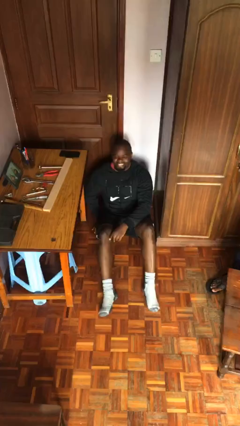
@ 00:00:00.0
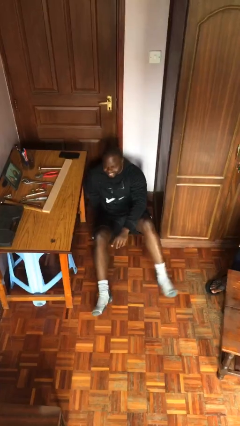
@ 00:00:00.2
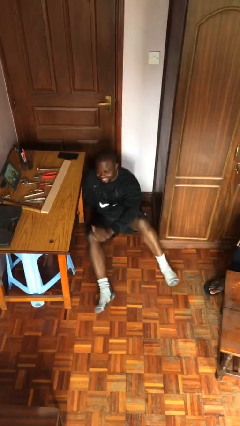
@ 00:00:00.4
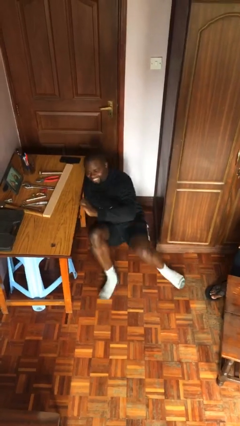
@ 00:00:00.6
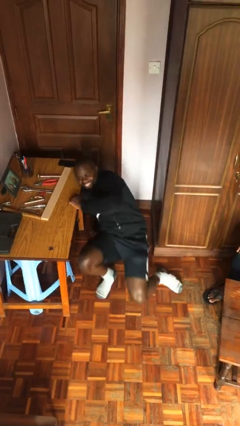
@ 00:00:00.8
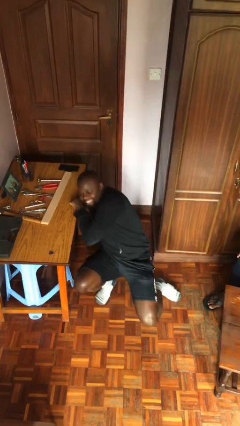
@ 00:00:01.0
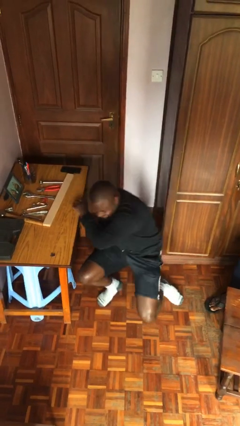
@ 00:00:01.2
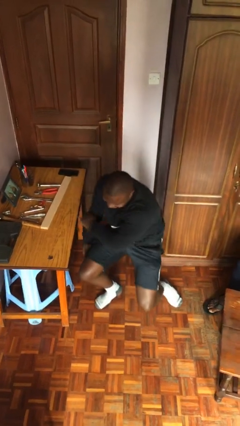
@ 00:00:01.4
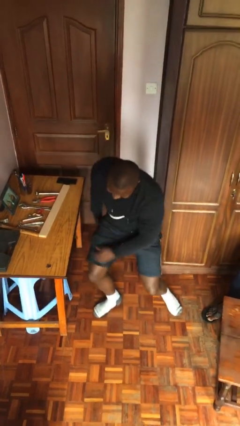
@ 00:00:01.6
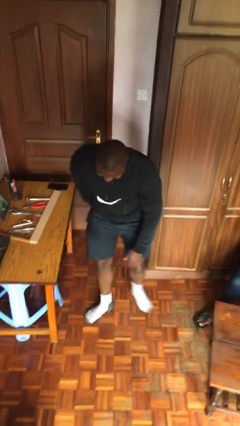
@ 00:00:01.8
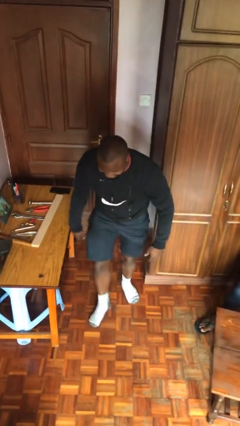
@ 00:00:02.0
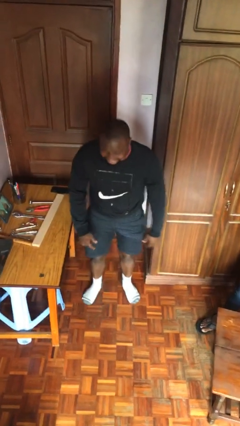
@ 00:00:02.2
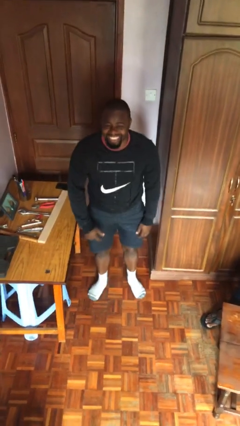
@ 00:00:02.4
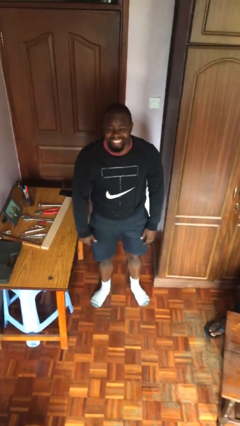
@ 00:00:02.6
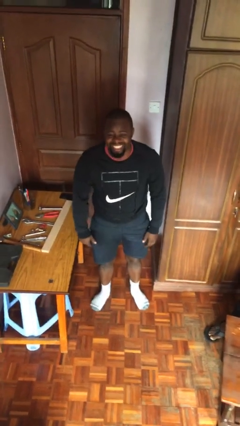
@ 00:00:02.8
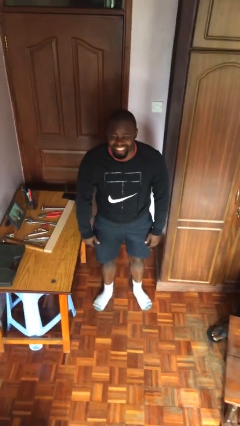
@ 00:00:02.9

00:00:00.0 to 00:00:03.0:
person stands up

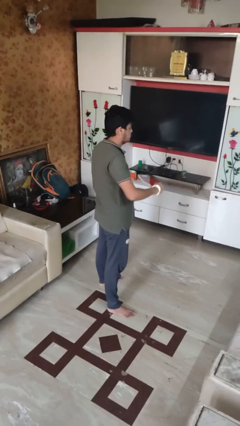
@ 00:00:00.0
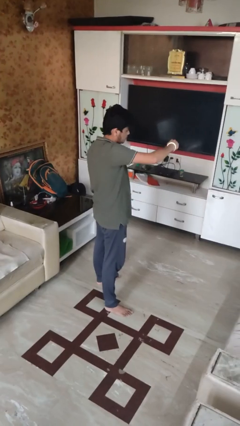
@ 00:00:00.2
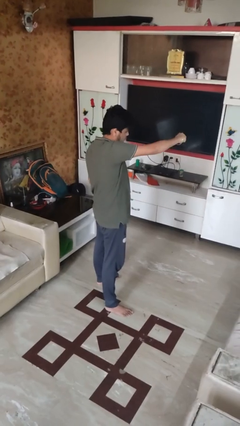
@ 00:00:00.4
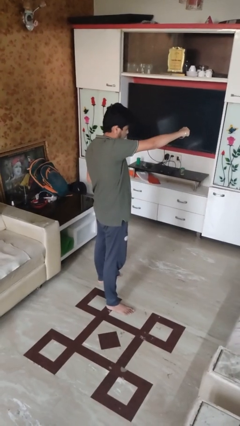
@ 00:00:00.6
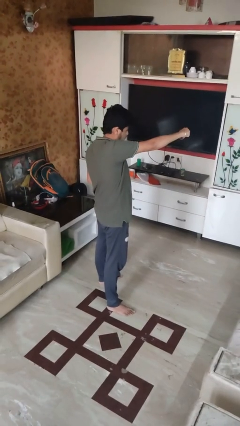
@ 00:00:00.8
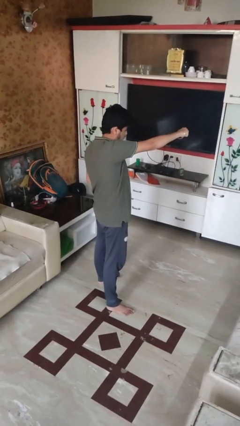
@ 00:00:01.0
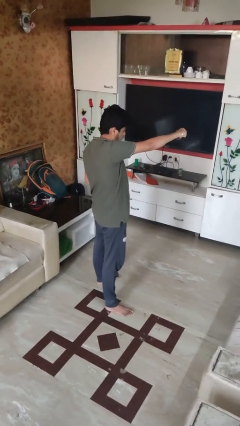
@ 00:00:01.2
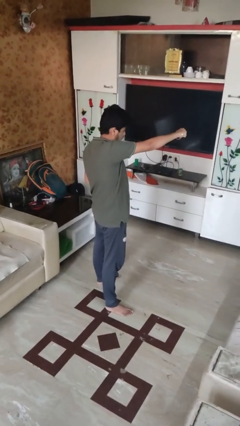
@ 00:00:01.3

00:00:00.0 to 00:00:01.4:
person punches

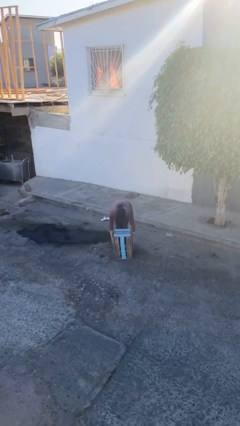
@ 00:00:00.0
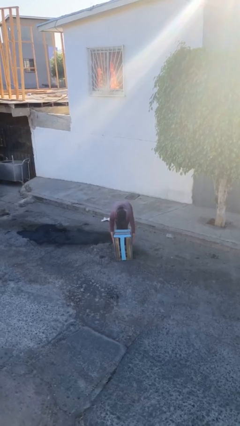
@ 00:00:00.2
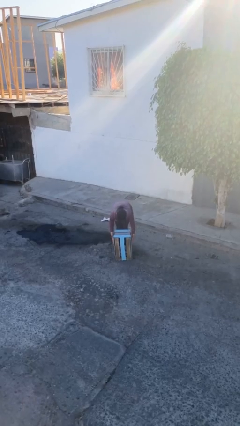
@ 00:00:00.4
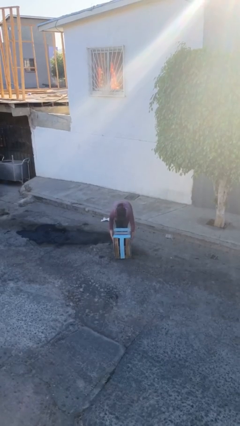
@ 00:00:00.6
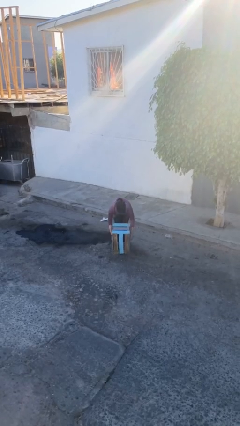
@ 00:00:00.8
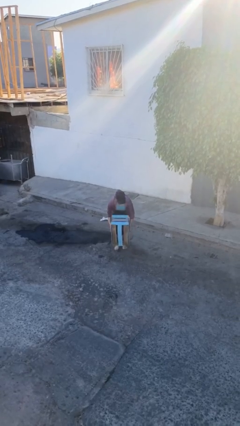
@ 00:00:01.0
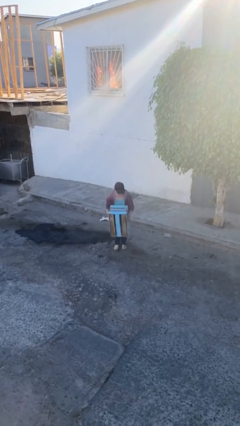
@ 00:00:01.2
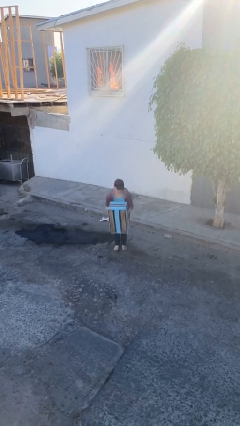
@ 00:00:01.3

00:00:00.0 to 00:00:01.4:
person picks up object from floor

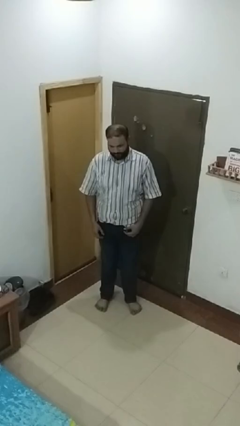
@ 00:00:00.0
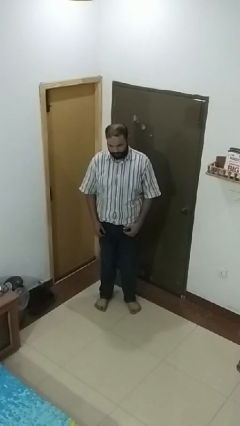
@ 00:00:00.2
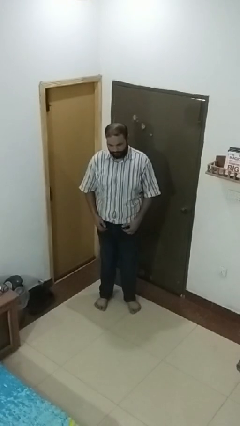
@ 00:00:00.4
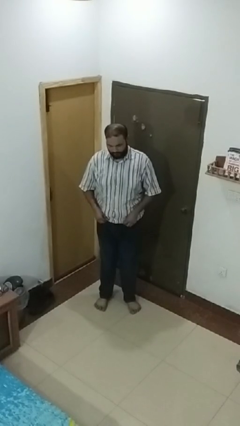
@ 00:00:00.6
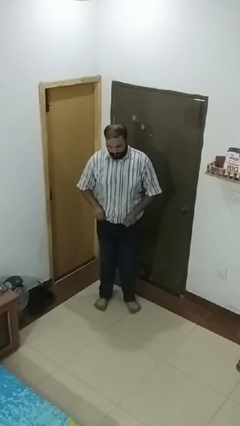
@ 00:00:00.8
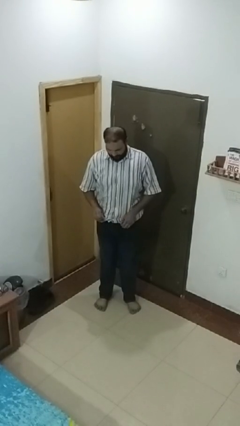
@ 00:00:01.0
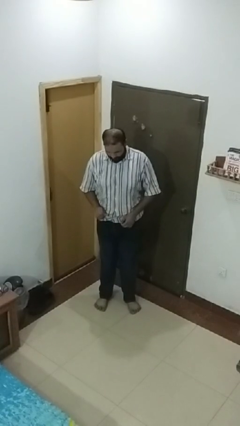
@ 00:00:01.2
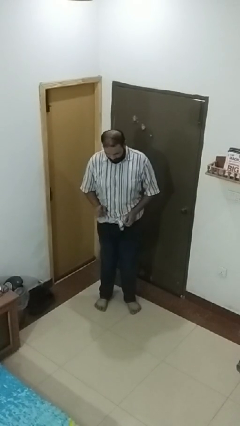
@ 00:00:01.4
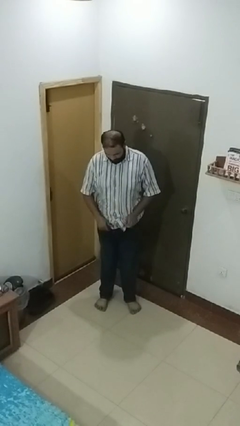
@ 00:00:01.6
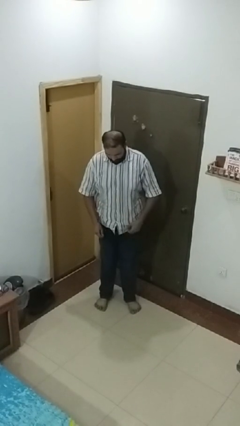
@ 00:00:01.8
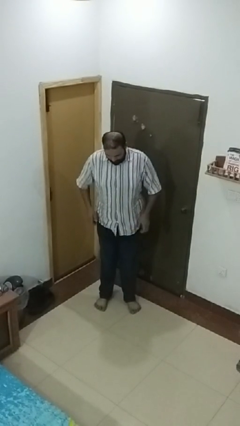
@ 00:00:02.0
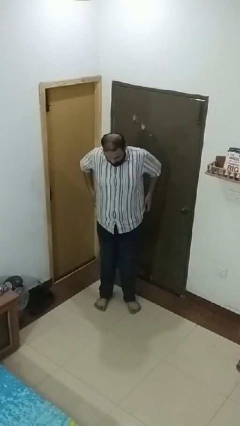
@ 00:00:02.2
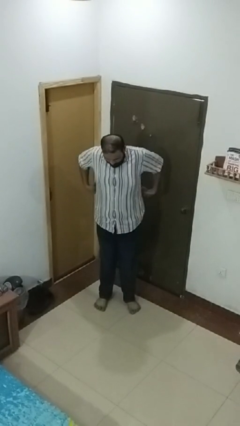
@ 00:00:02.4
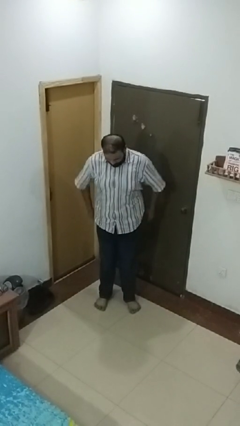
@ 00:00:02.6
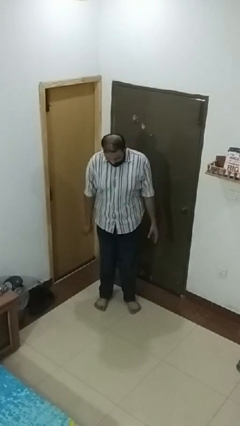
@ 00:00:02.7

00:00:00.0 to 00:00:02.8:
person untucks shirt

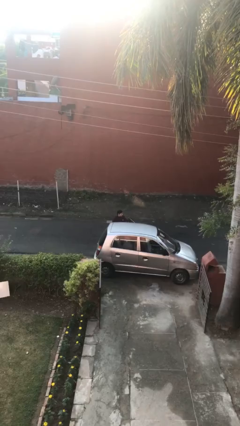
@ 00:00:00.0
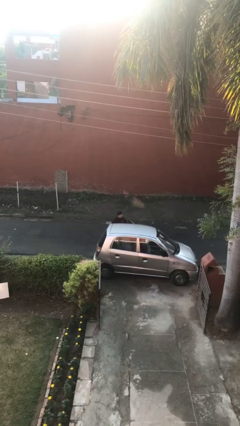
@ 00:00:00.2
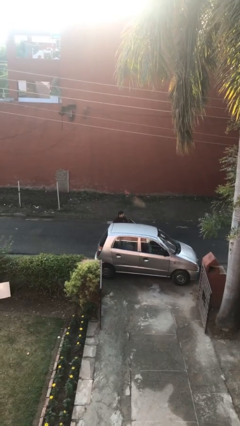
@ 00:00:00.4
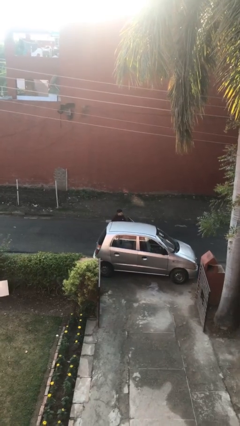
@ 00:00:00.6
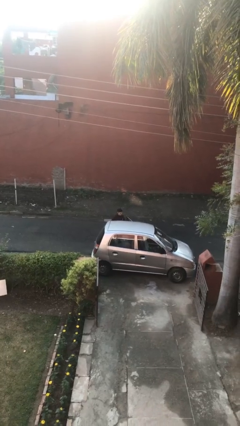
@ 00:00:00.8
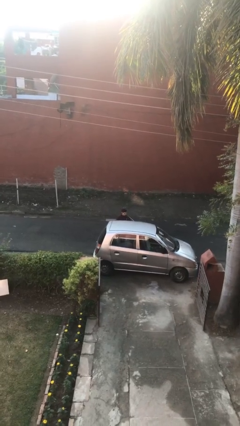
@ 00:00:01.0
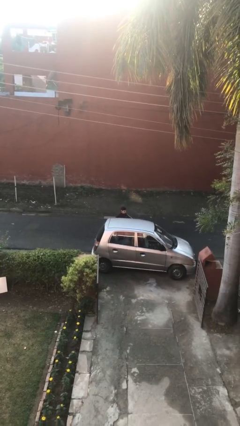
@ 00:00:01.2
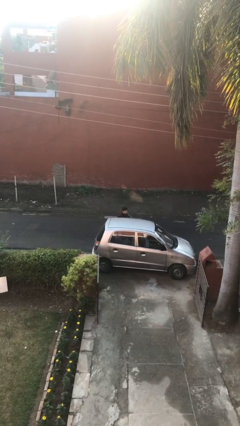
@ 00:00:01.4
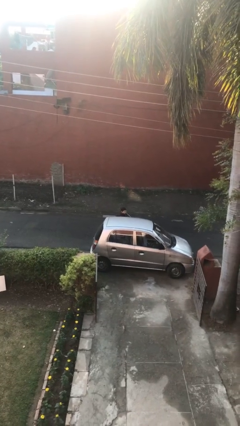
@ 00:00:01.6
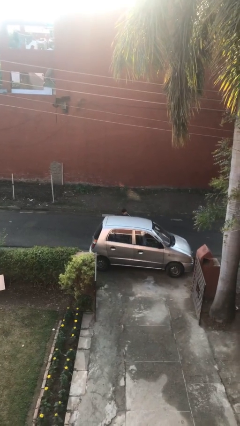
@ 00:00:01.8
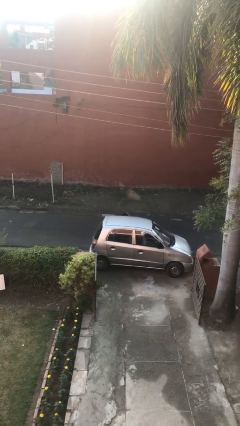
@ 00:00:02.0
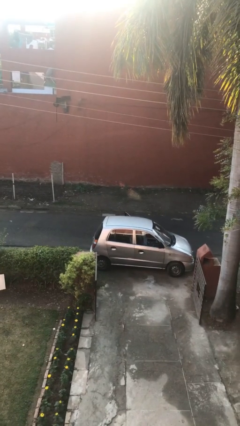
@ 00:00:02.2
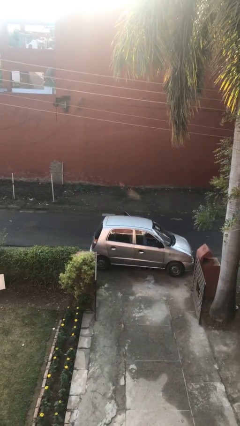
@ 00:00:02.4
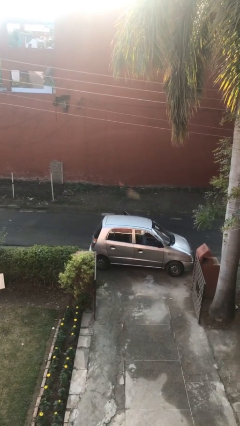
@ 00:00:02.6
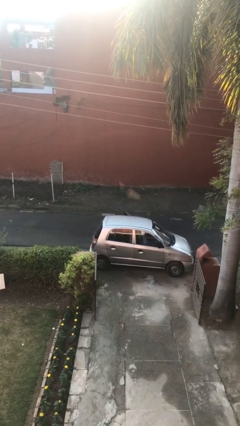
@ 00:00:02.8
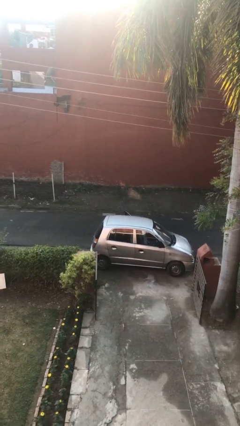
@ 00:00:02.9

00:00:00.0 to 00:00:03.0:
person enters car

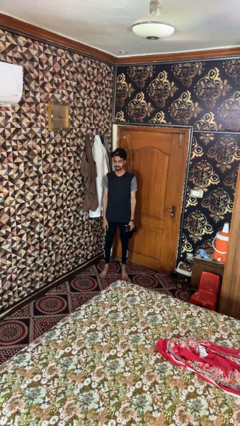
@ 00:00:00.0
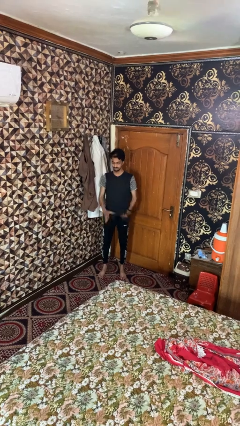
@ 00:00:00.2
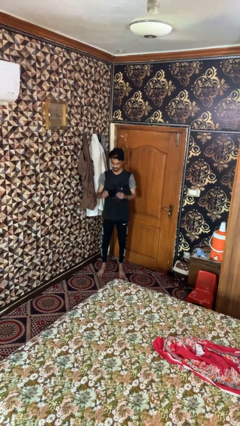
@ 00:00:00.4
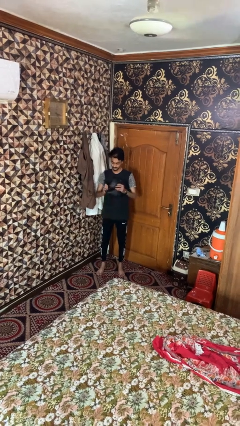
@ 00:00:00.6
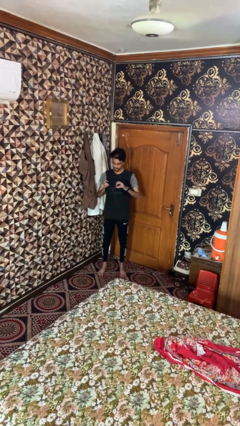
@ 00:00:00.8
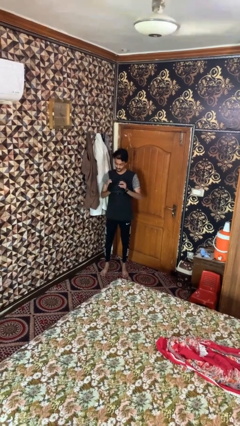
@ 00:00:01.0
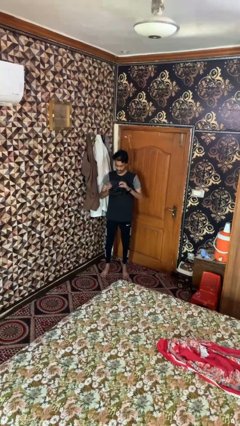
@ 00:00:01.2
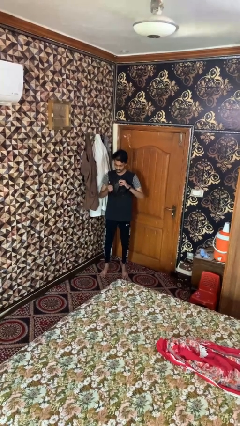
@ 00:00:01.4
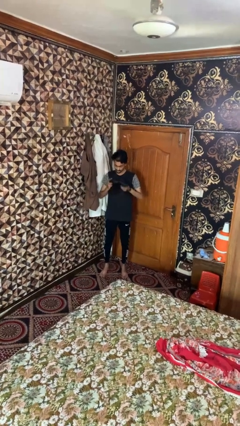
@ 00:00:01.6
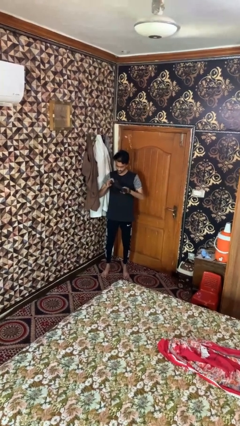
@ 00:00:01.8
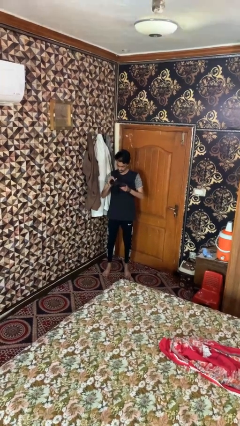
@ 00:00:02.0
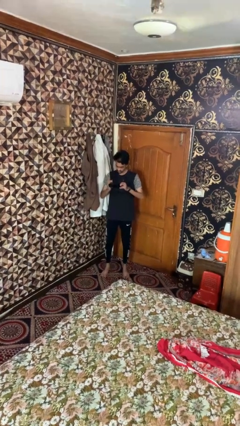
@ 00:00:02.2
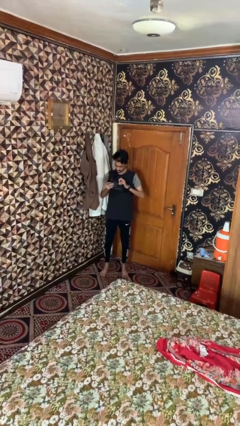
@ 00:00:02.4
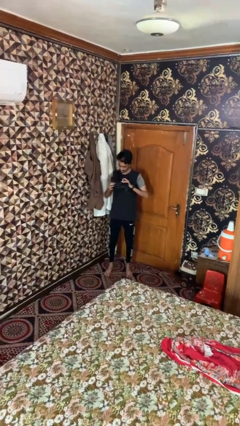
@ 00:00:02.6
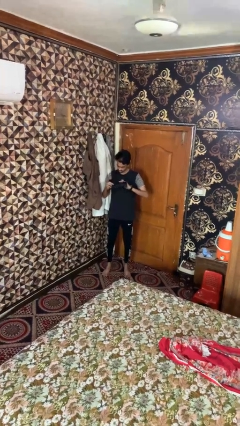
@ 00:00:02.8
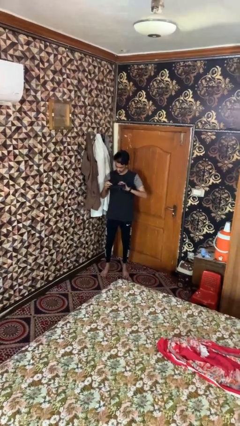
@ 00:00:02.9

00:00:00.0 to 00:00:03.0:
person squeezes object

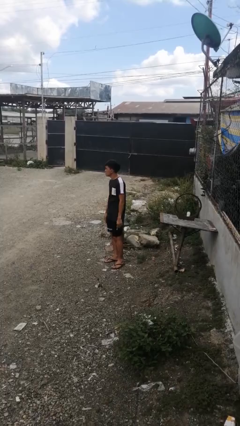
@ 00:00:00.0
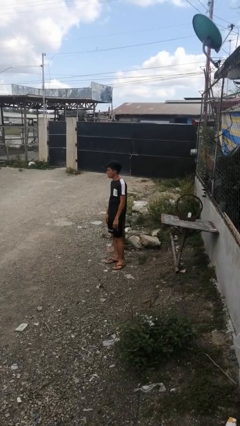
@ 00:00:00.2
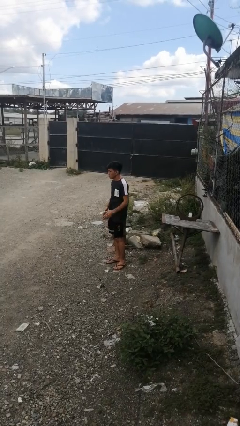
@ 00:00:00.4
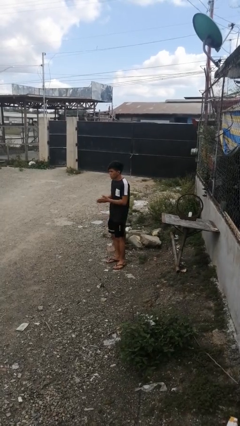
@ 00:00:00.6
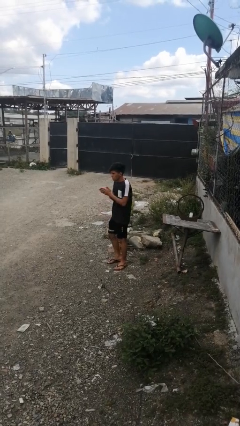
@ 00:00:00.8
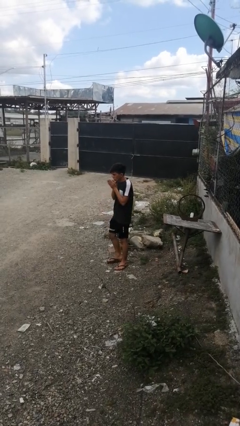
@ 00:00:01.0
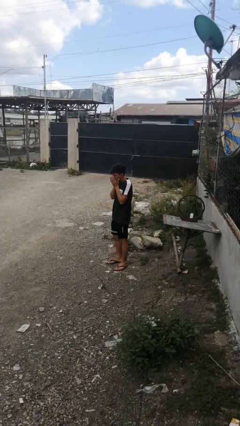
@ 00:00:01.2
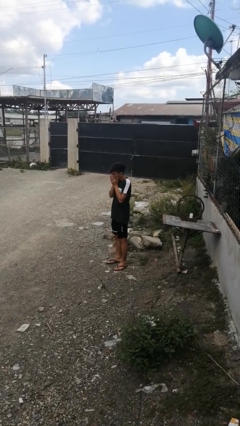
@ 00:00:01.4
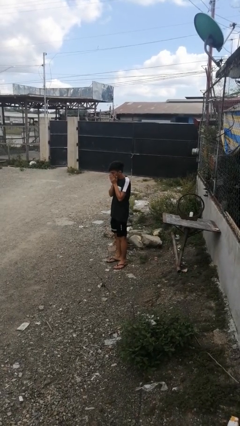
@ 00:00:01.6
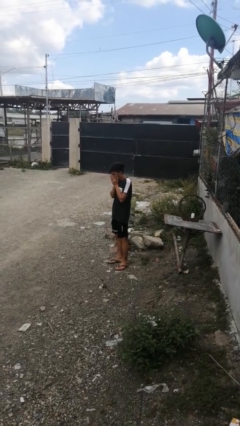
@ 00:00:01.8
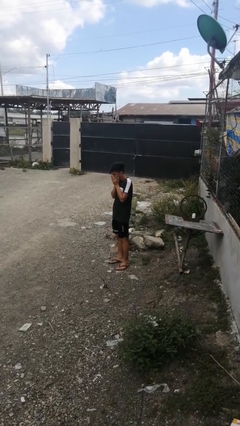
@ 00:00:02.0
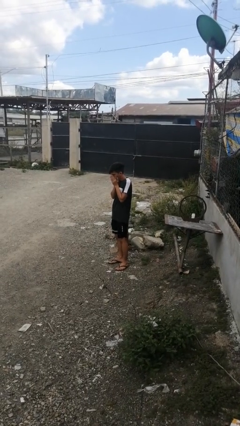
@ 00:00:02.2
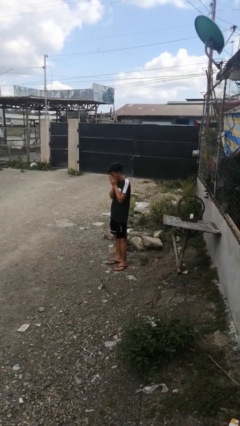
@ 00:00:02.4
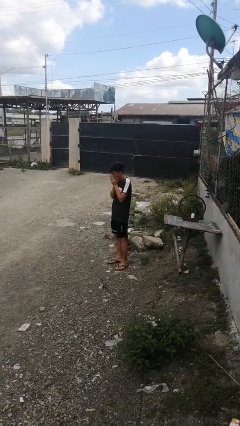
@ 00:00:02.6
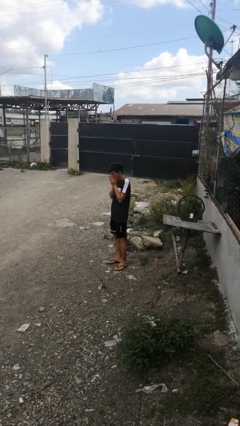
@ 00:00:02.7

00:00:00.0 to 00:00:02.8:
person blows into hands
